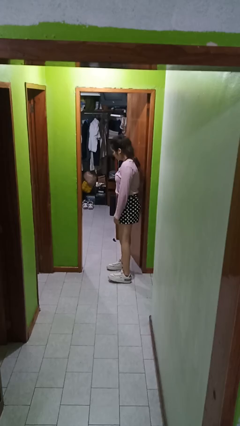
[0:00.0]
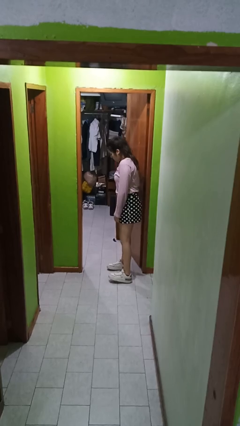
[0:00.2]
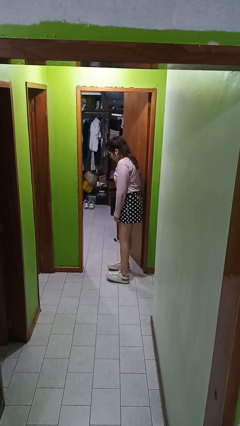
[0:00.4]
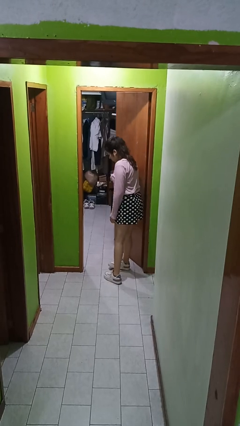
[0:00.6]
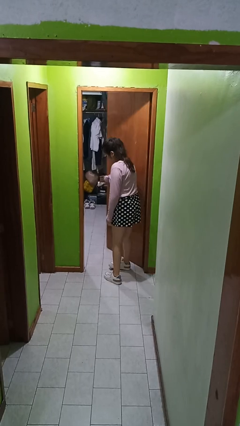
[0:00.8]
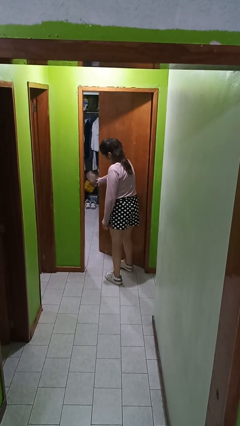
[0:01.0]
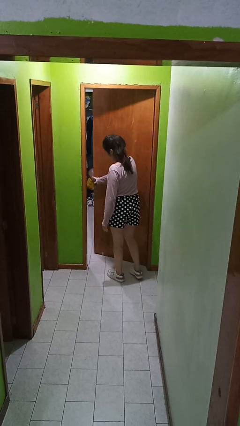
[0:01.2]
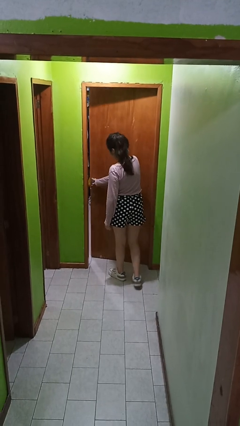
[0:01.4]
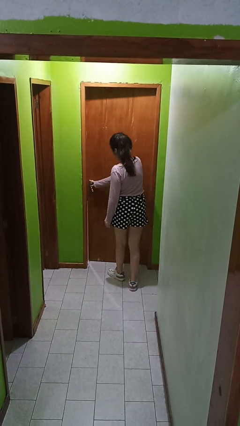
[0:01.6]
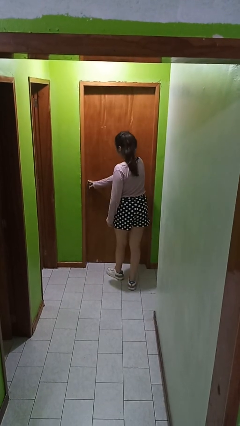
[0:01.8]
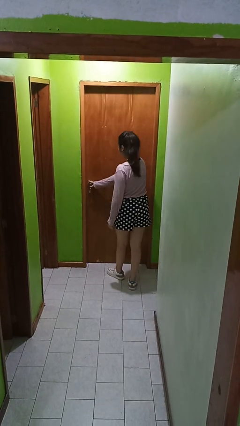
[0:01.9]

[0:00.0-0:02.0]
person closes facility door

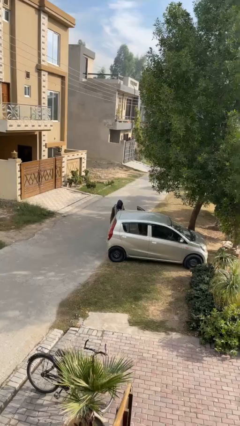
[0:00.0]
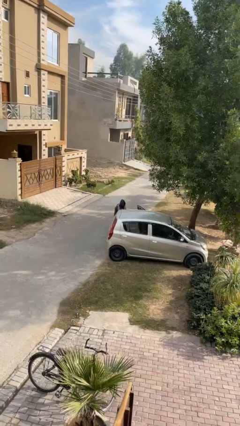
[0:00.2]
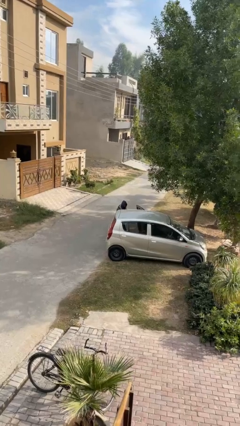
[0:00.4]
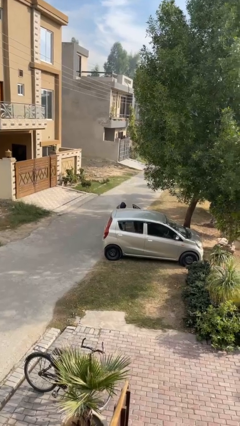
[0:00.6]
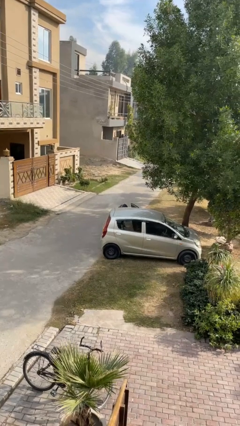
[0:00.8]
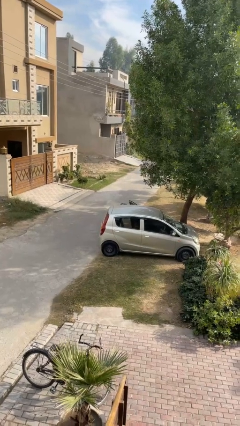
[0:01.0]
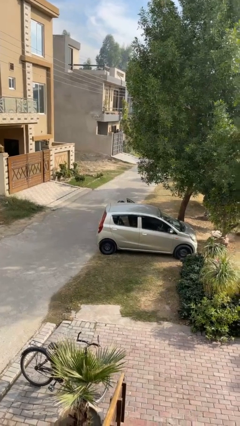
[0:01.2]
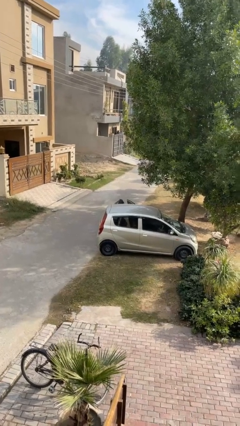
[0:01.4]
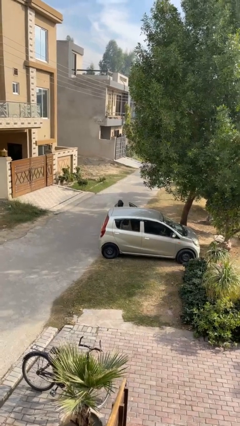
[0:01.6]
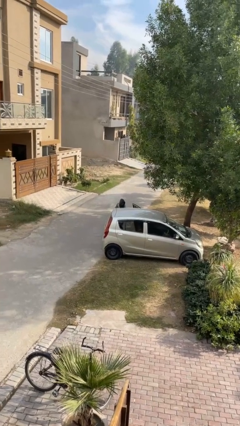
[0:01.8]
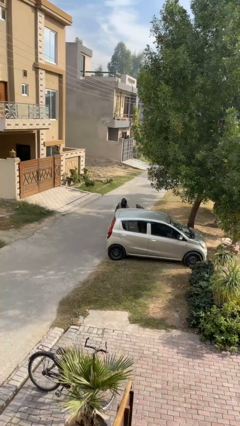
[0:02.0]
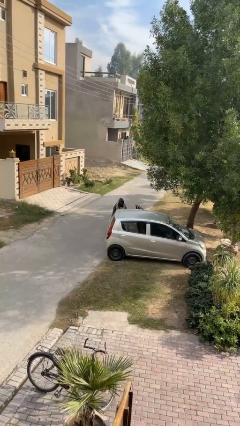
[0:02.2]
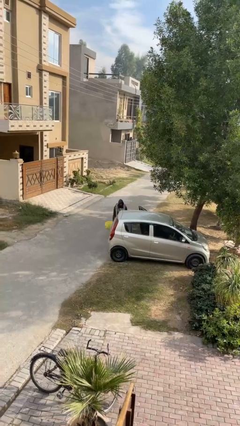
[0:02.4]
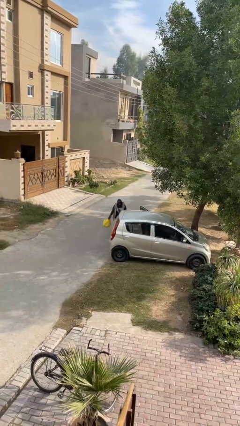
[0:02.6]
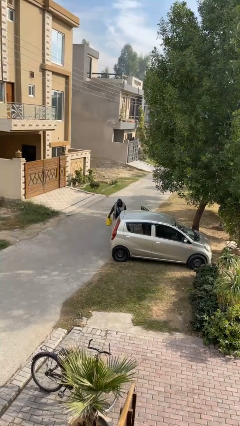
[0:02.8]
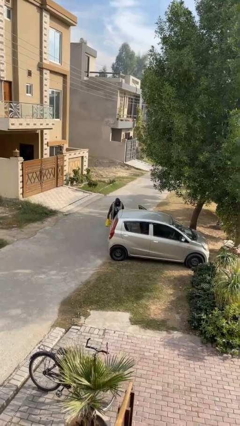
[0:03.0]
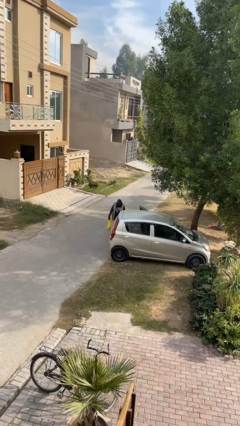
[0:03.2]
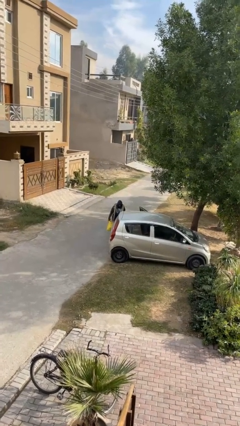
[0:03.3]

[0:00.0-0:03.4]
person unloads car

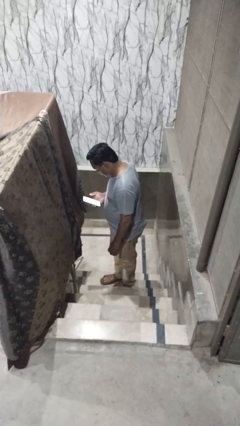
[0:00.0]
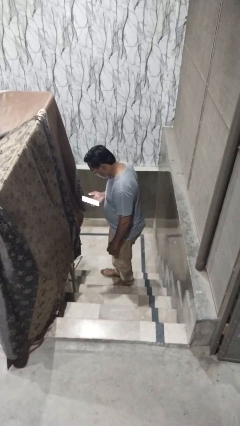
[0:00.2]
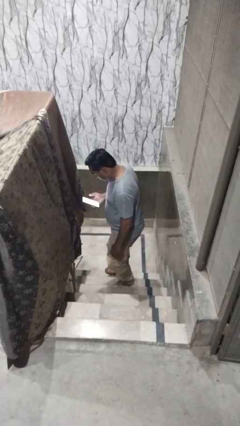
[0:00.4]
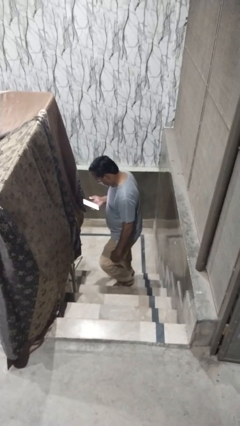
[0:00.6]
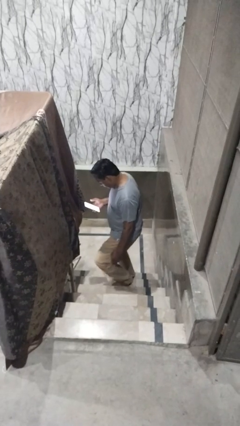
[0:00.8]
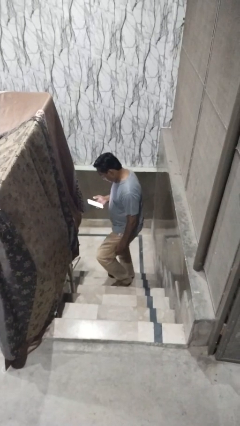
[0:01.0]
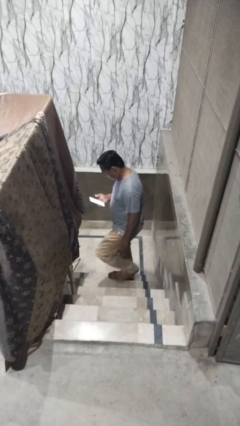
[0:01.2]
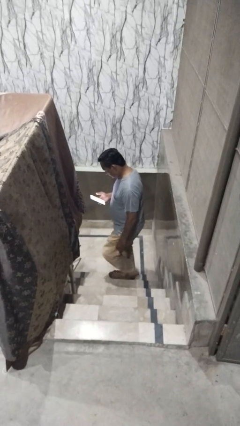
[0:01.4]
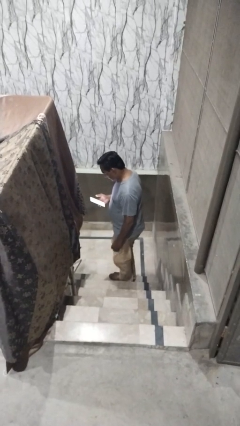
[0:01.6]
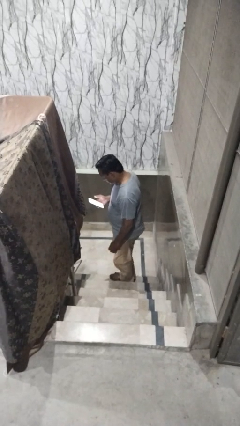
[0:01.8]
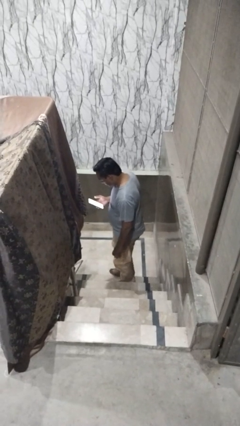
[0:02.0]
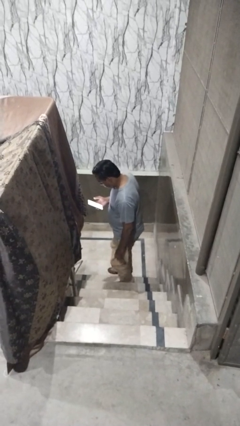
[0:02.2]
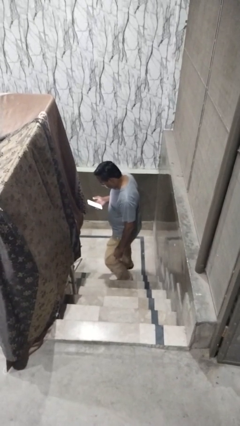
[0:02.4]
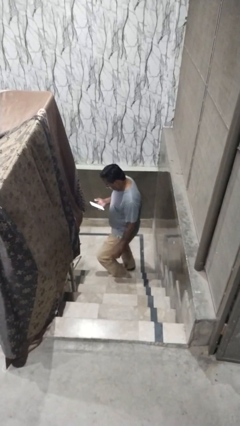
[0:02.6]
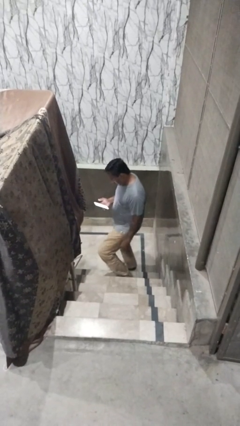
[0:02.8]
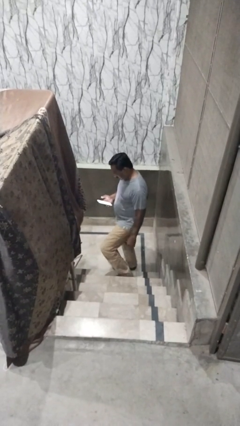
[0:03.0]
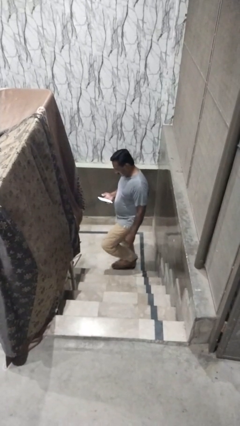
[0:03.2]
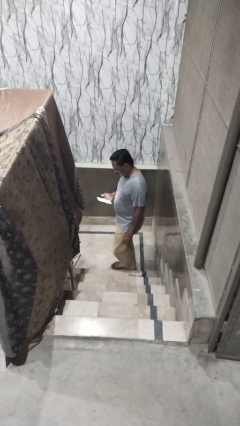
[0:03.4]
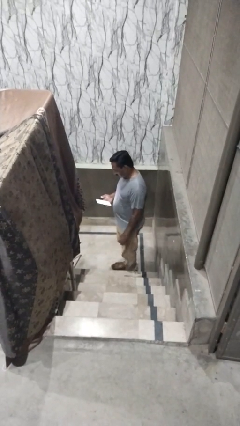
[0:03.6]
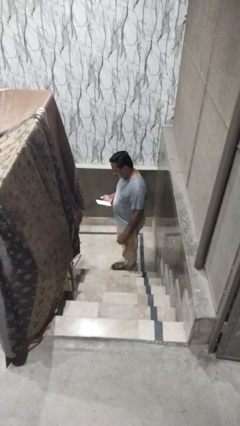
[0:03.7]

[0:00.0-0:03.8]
person climbs down stairs

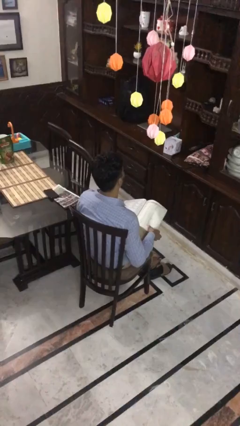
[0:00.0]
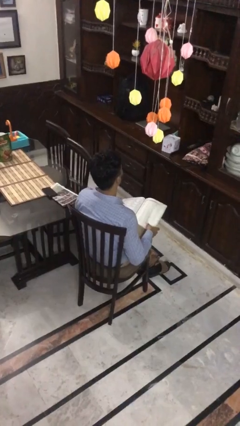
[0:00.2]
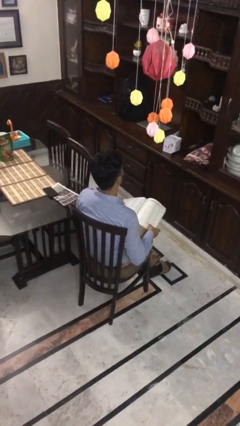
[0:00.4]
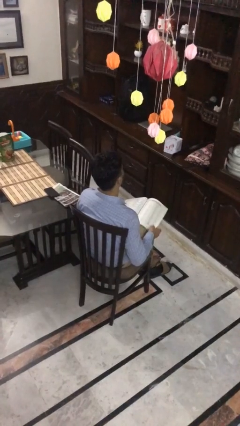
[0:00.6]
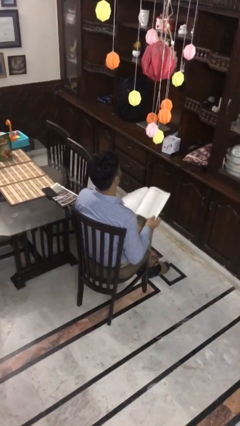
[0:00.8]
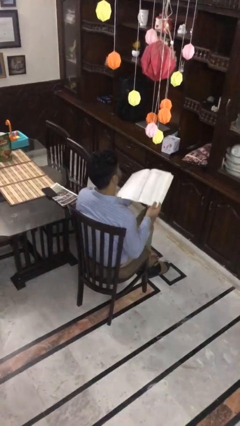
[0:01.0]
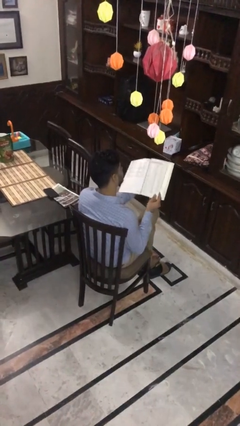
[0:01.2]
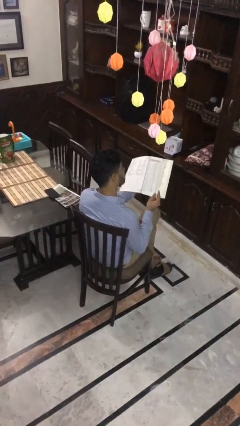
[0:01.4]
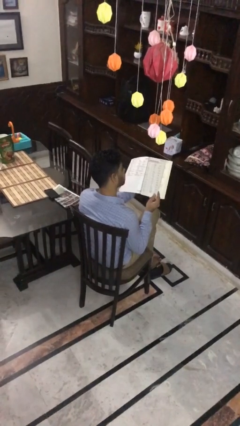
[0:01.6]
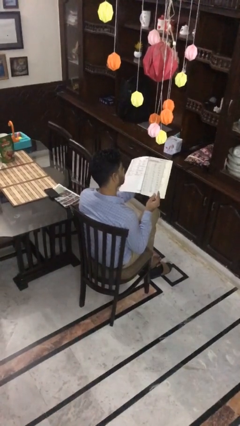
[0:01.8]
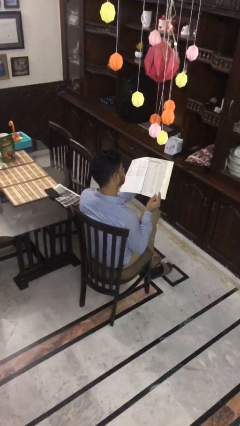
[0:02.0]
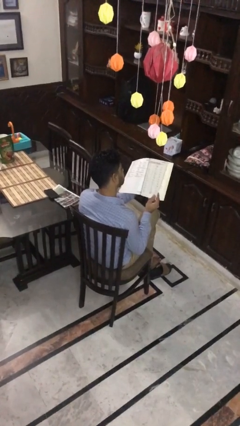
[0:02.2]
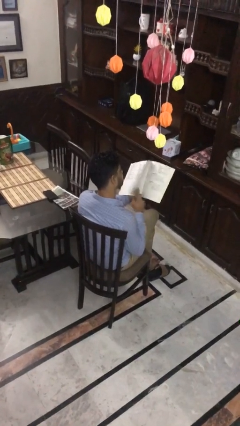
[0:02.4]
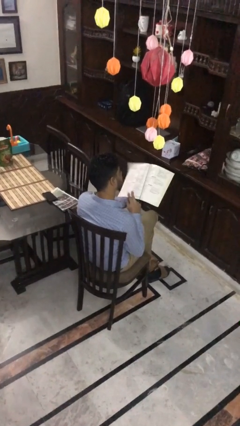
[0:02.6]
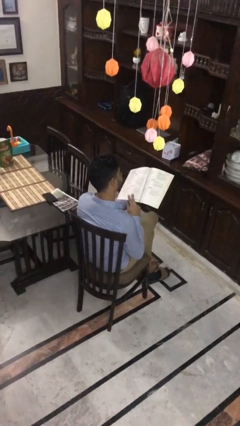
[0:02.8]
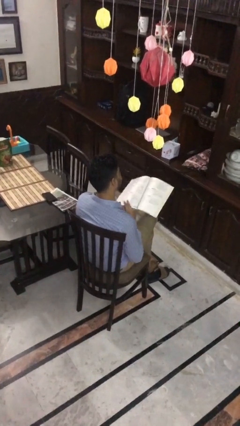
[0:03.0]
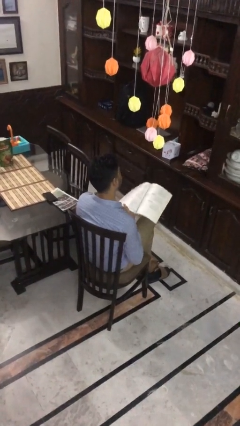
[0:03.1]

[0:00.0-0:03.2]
person reads book

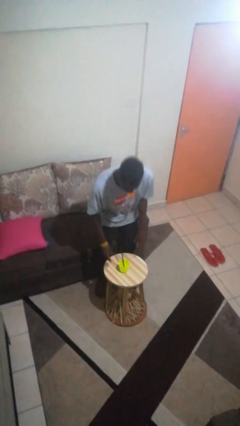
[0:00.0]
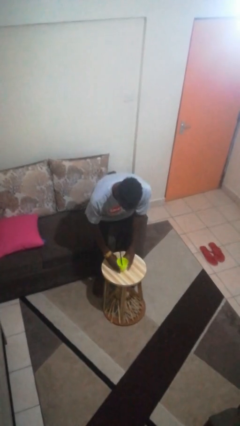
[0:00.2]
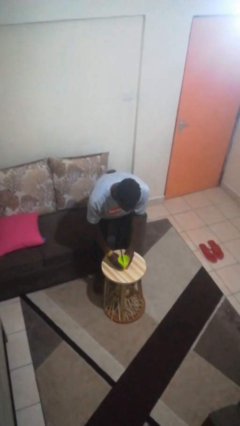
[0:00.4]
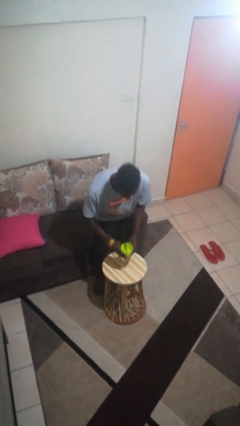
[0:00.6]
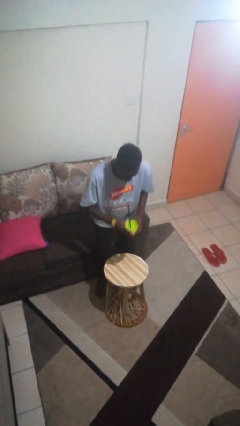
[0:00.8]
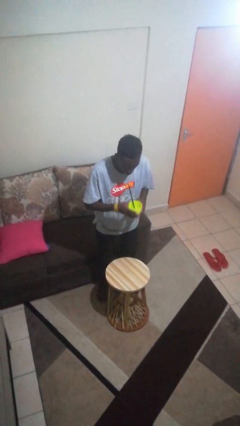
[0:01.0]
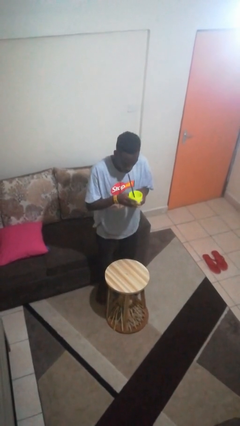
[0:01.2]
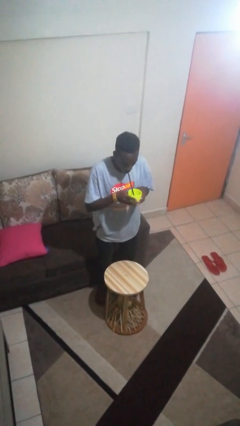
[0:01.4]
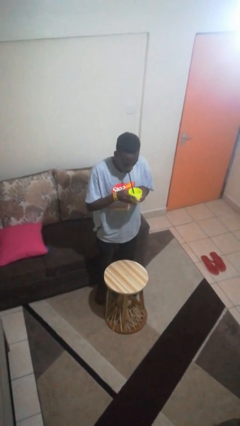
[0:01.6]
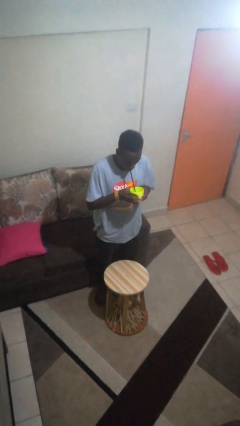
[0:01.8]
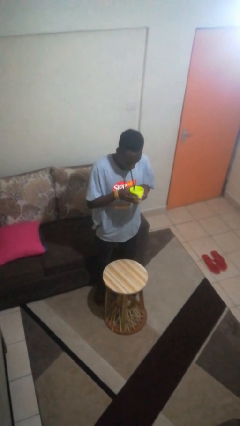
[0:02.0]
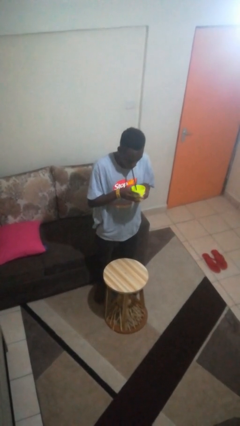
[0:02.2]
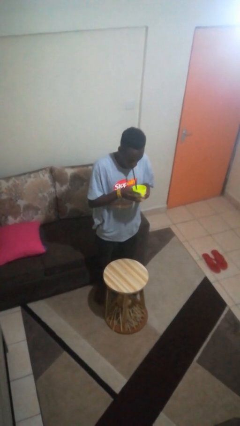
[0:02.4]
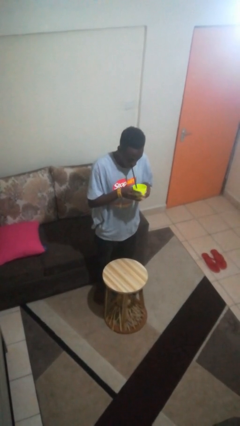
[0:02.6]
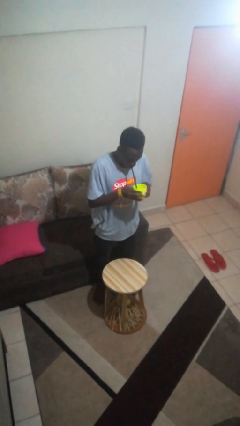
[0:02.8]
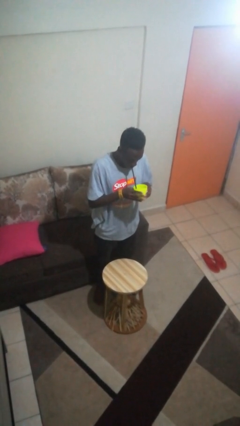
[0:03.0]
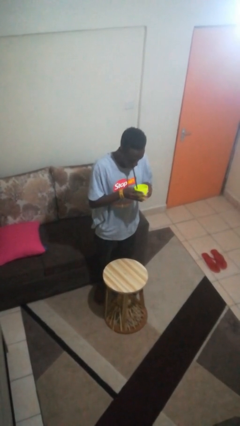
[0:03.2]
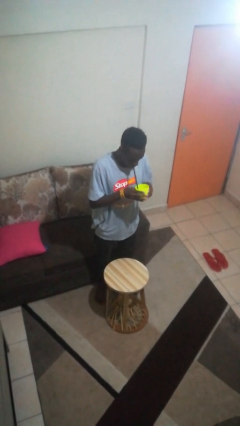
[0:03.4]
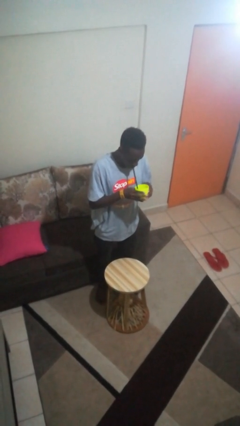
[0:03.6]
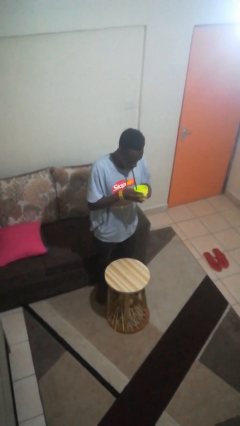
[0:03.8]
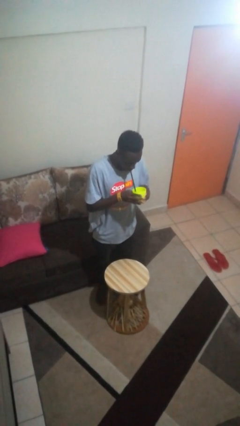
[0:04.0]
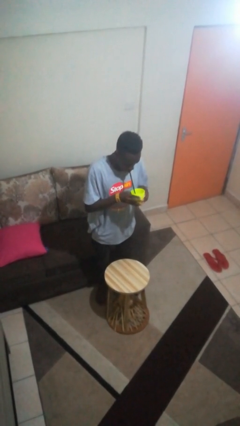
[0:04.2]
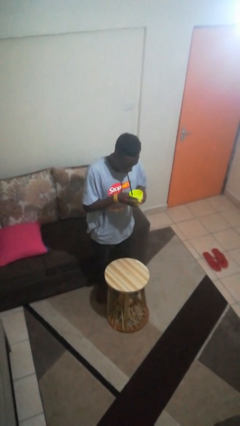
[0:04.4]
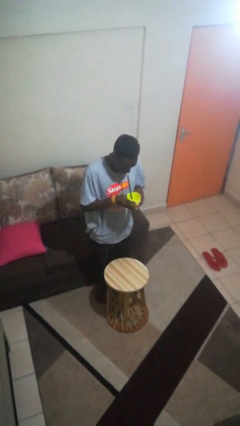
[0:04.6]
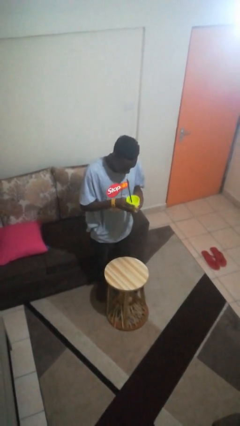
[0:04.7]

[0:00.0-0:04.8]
person drinks from straw

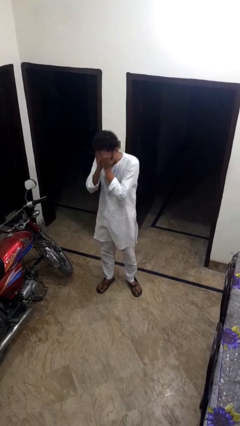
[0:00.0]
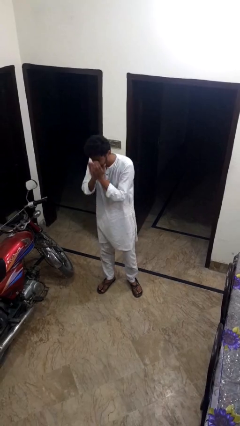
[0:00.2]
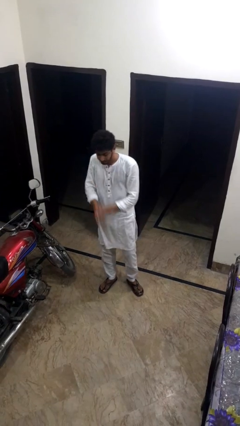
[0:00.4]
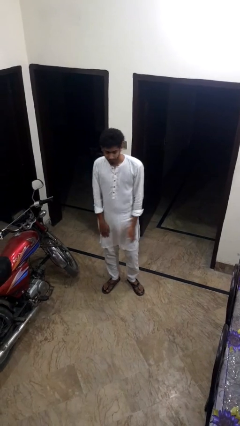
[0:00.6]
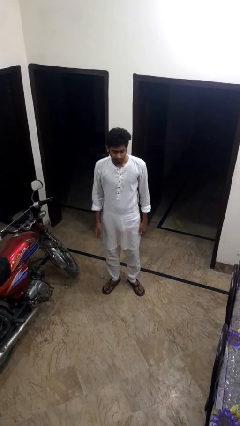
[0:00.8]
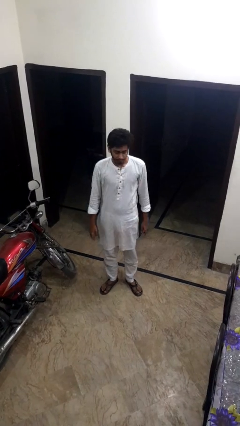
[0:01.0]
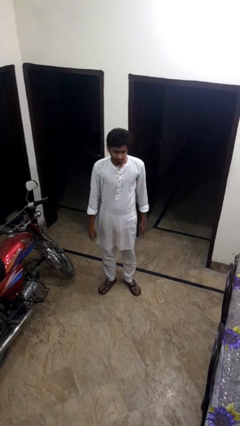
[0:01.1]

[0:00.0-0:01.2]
person sneezes into hand
